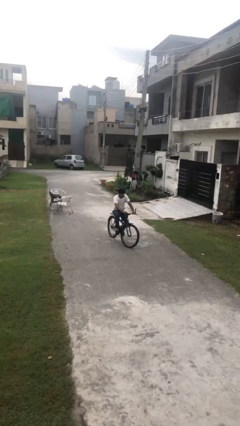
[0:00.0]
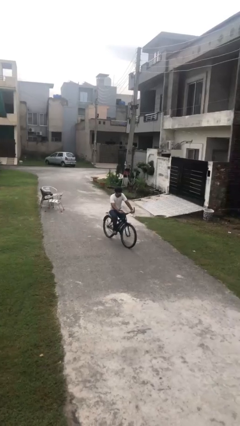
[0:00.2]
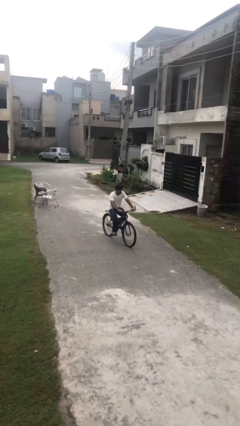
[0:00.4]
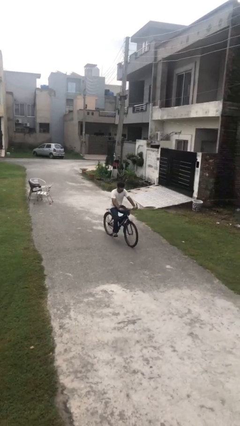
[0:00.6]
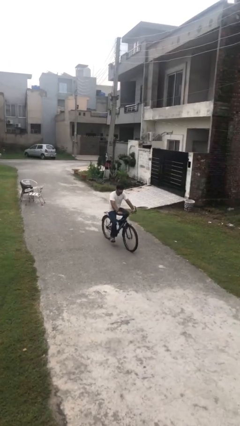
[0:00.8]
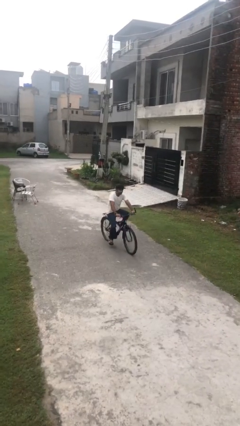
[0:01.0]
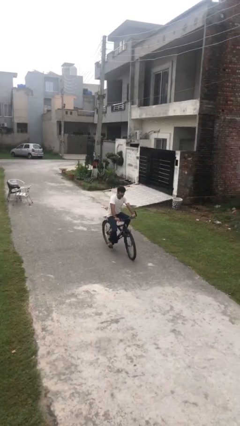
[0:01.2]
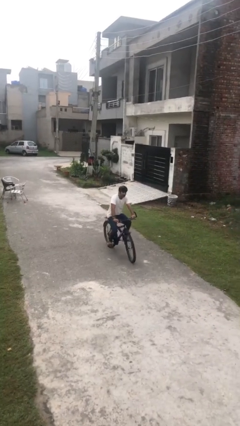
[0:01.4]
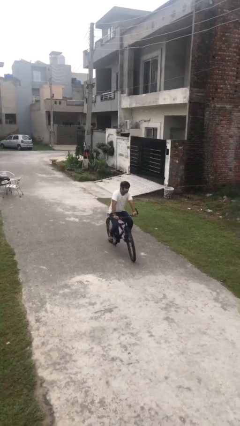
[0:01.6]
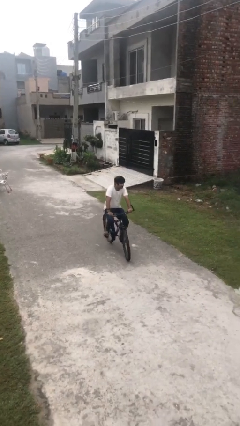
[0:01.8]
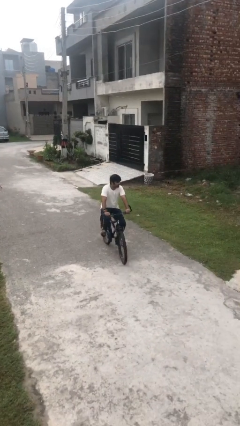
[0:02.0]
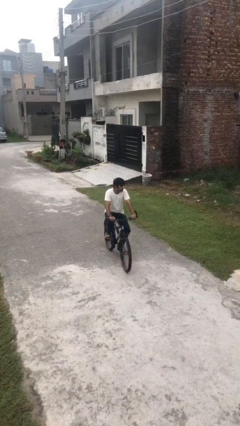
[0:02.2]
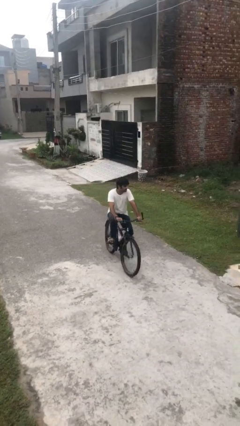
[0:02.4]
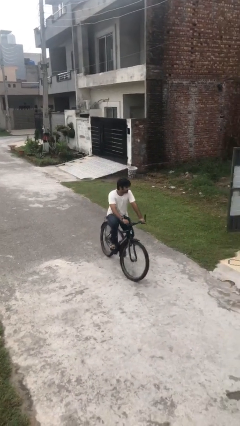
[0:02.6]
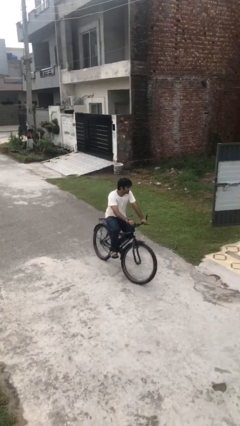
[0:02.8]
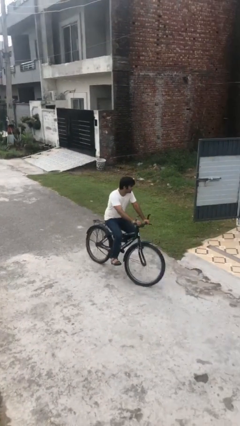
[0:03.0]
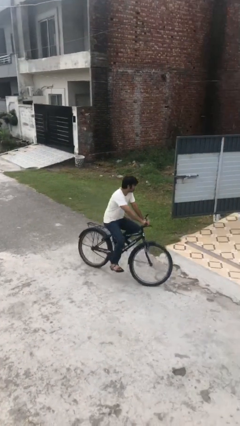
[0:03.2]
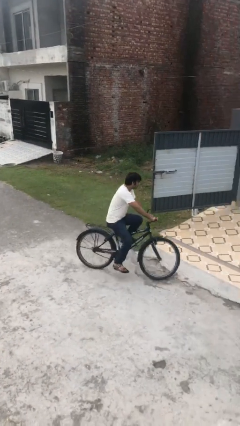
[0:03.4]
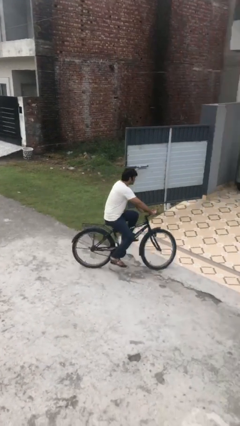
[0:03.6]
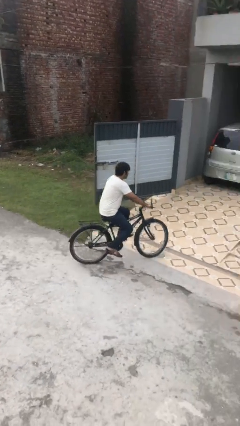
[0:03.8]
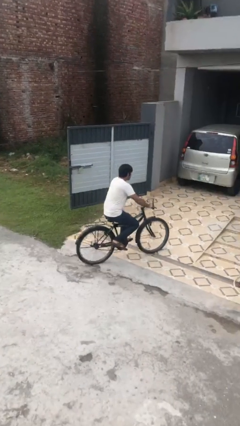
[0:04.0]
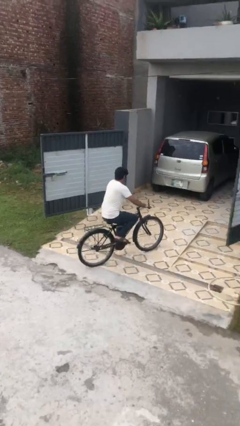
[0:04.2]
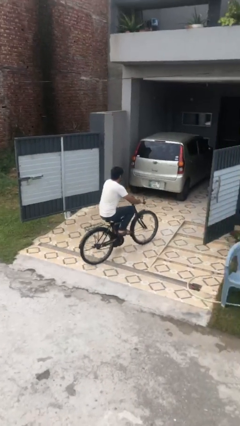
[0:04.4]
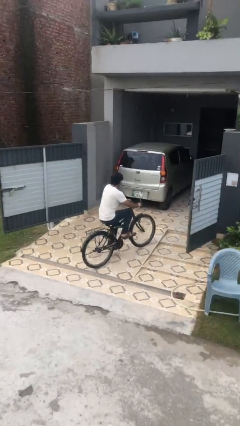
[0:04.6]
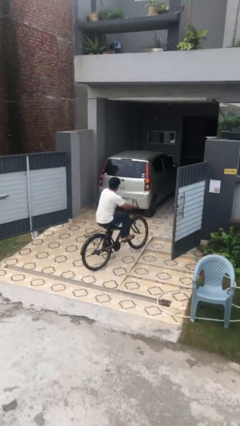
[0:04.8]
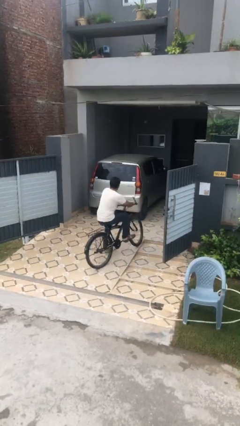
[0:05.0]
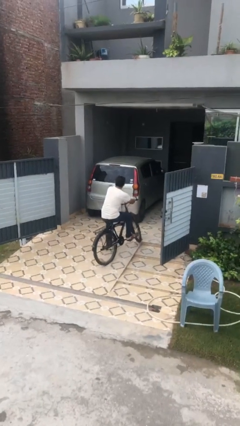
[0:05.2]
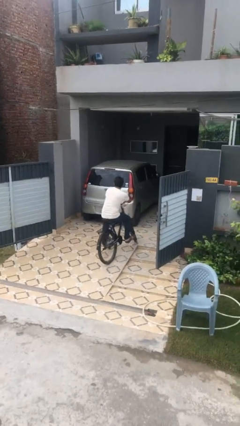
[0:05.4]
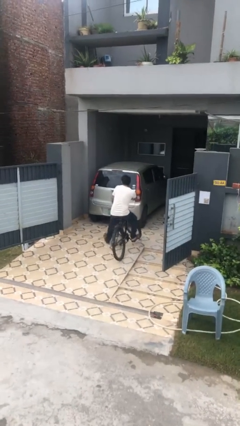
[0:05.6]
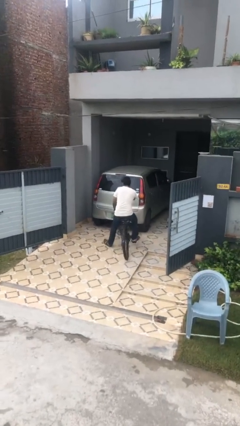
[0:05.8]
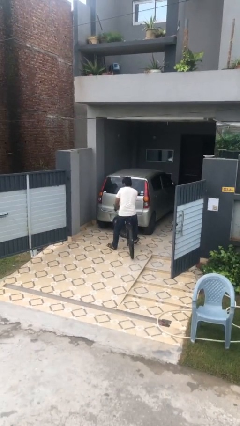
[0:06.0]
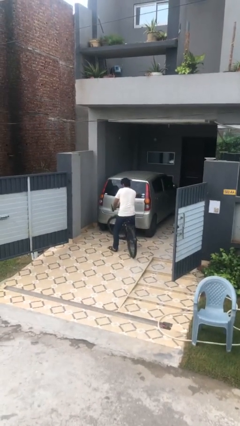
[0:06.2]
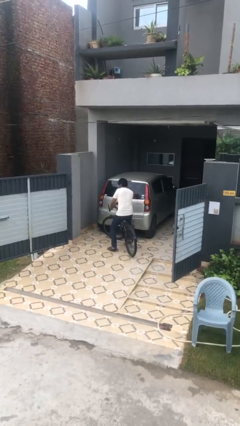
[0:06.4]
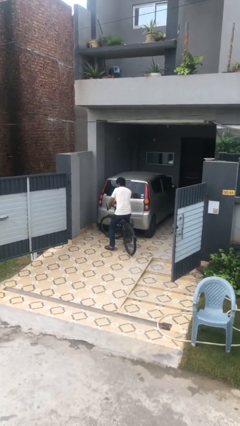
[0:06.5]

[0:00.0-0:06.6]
person rides bicycle

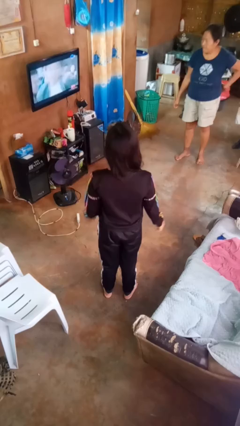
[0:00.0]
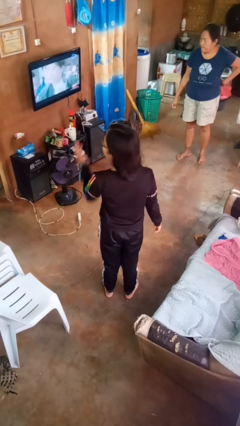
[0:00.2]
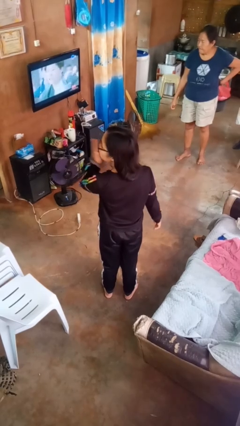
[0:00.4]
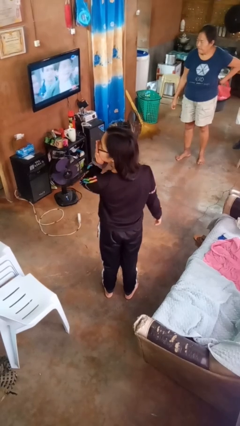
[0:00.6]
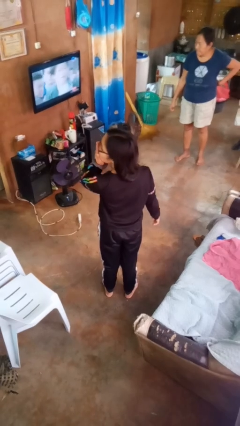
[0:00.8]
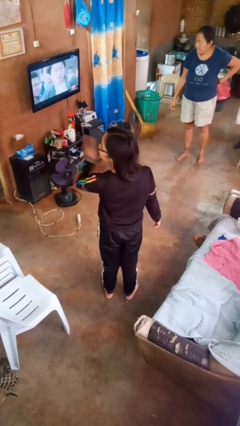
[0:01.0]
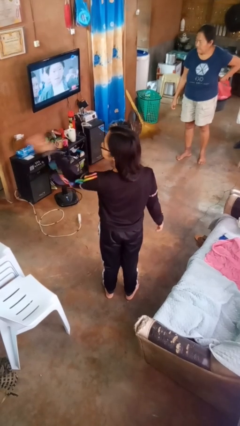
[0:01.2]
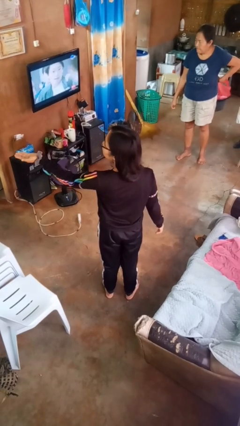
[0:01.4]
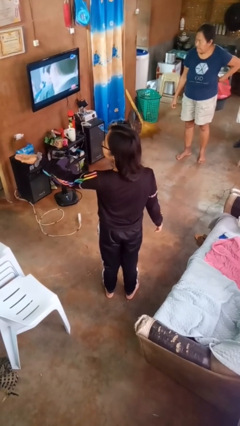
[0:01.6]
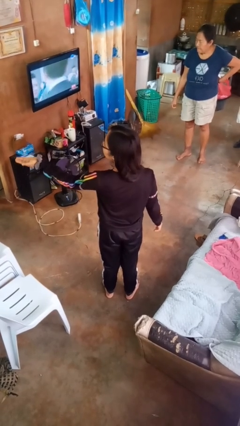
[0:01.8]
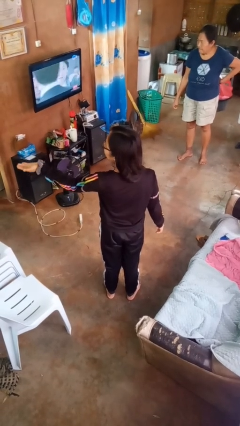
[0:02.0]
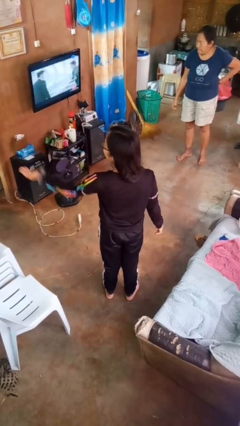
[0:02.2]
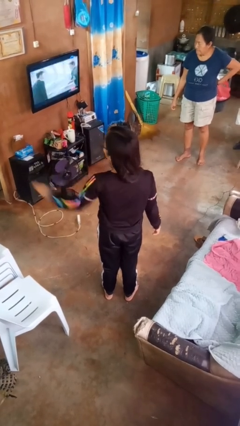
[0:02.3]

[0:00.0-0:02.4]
person gestures blow kiss

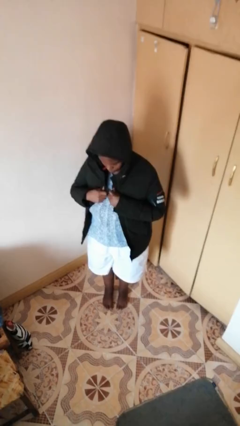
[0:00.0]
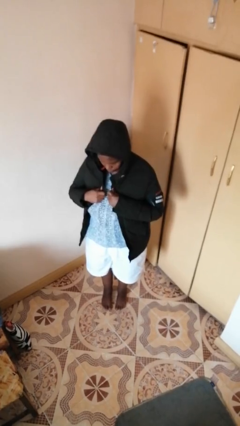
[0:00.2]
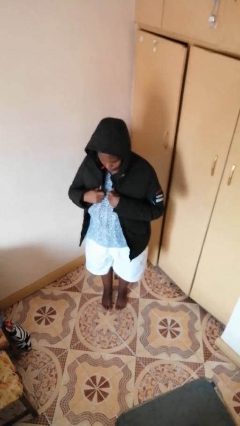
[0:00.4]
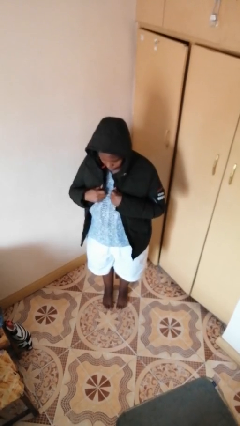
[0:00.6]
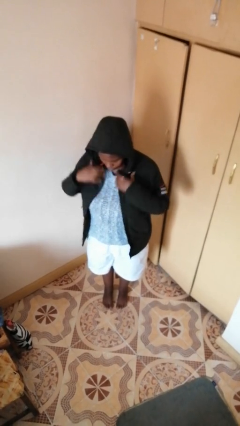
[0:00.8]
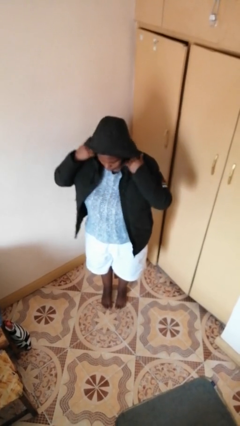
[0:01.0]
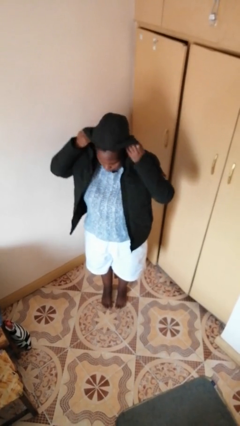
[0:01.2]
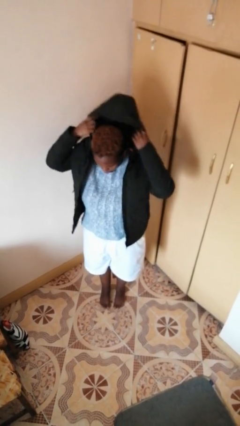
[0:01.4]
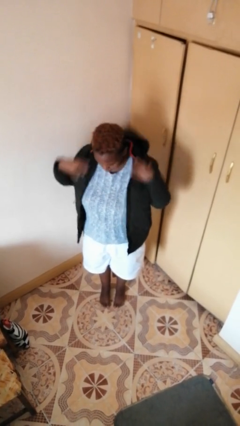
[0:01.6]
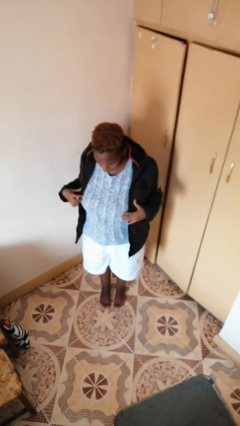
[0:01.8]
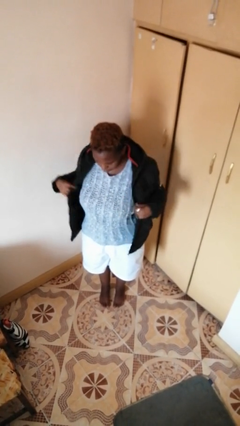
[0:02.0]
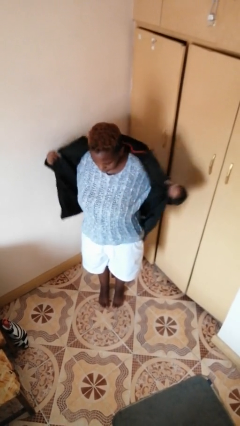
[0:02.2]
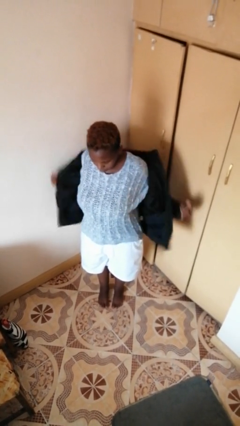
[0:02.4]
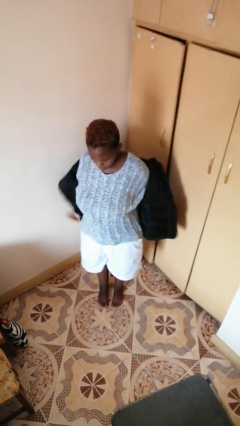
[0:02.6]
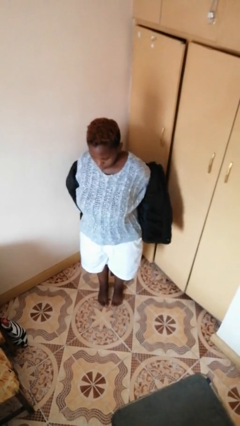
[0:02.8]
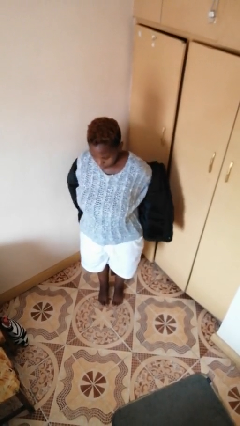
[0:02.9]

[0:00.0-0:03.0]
person takes off hoodie

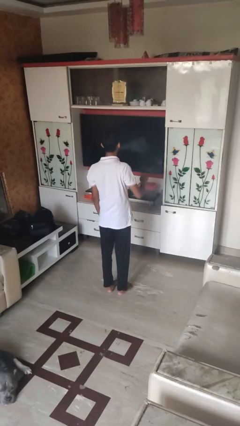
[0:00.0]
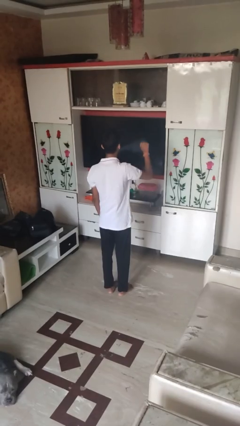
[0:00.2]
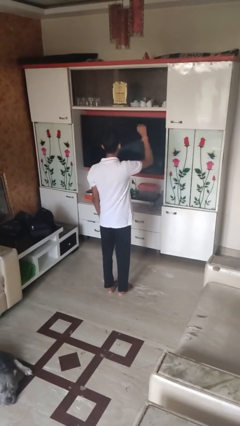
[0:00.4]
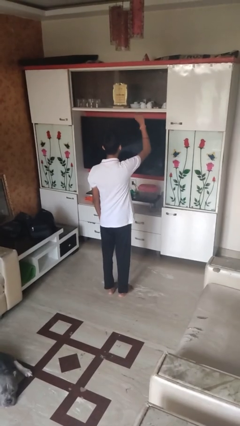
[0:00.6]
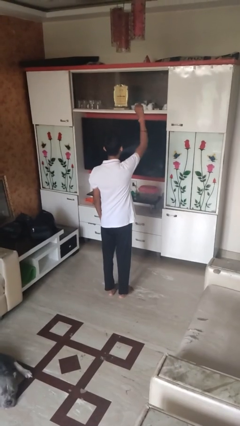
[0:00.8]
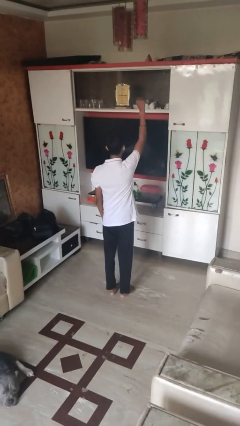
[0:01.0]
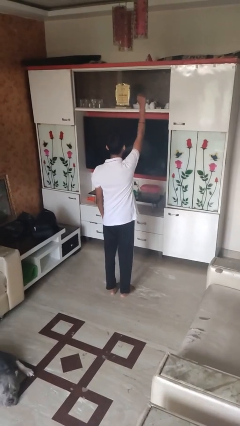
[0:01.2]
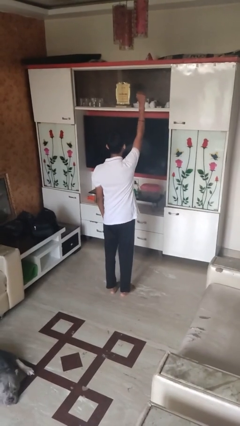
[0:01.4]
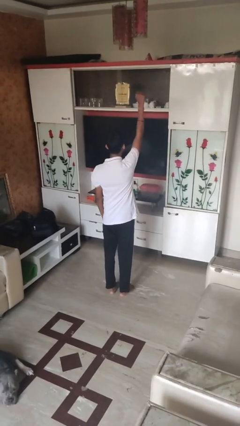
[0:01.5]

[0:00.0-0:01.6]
person gestures raise hand

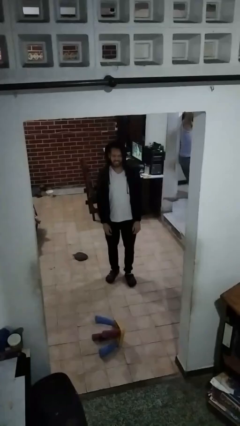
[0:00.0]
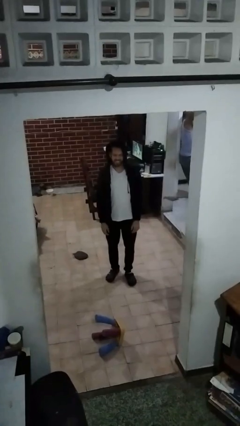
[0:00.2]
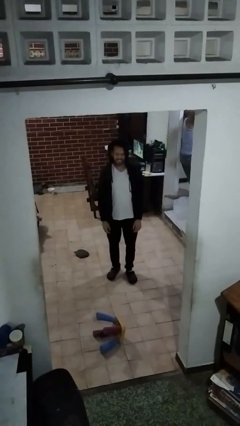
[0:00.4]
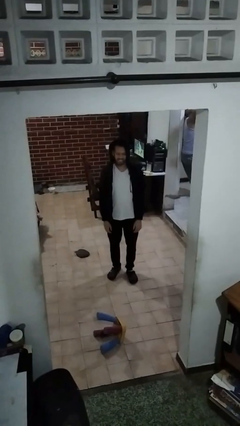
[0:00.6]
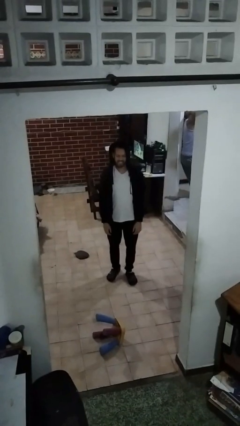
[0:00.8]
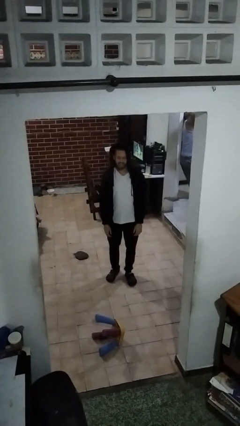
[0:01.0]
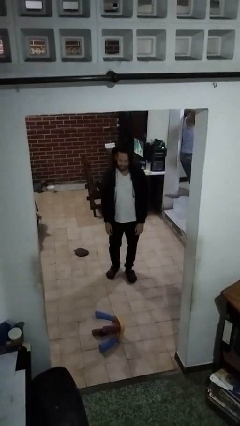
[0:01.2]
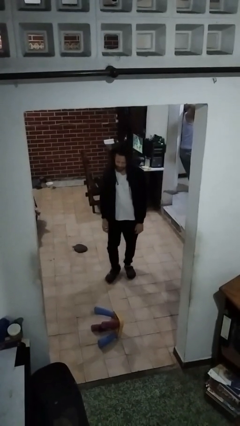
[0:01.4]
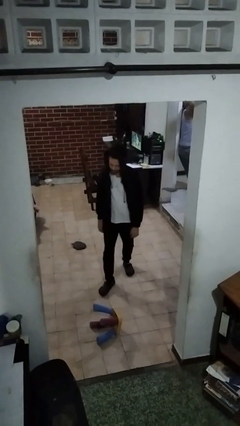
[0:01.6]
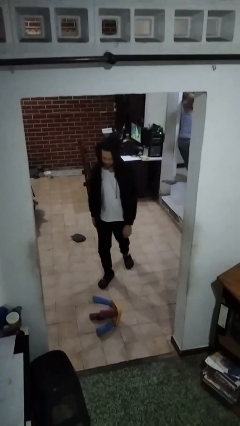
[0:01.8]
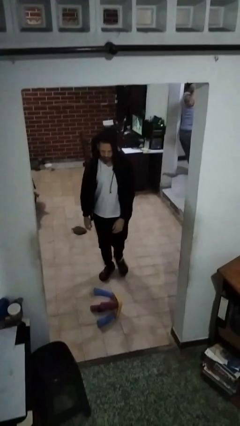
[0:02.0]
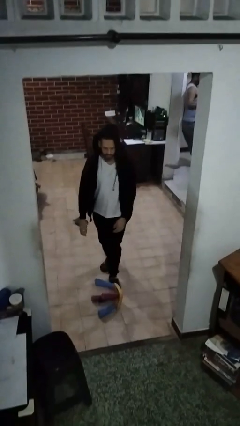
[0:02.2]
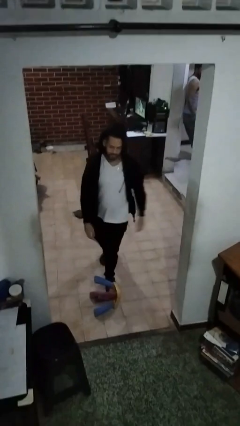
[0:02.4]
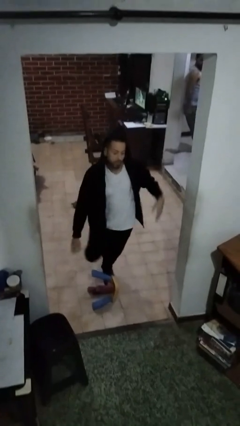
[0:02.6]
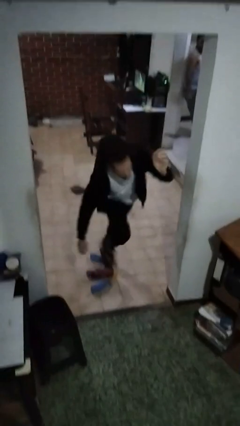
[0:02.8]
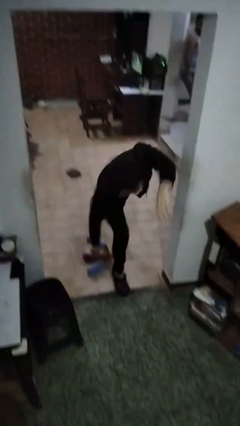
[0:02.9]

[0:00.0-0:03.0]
person trips on object on floor

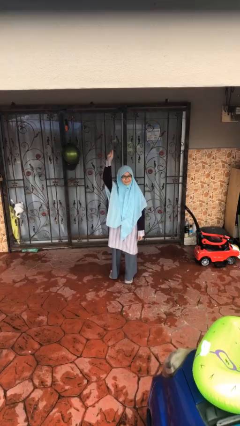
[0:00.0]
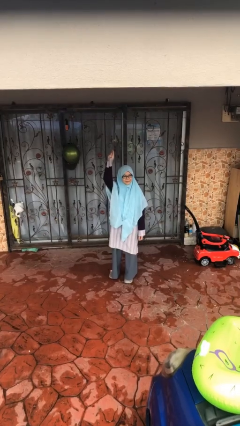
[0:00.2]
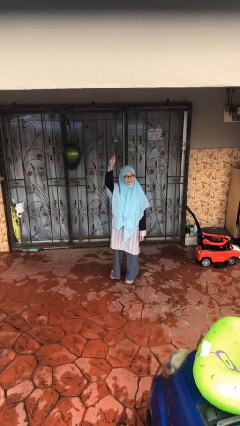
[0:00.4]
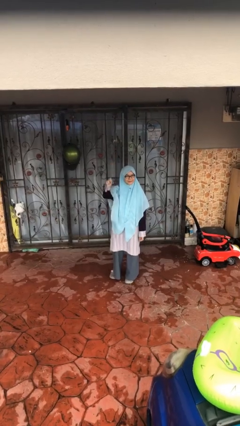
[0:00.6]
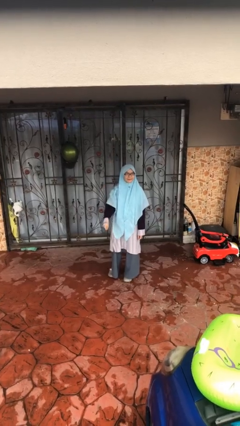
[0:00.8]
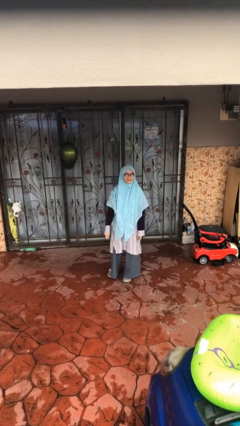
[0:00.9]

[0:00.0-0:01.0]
person gestures lower hand
